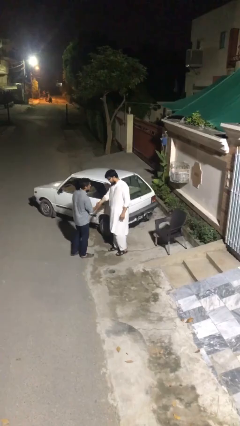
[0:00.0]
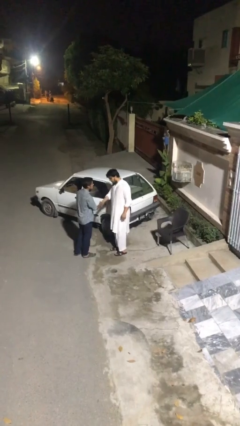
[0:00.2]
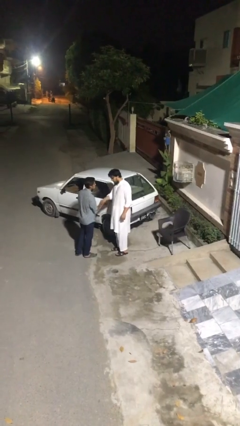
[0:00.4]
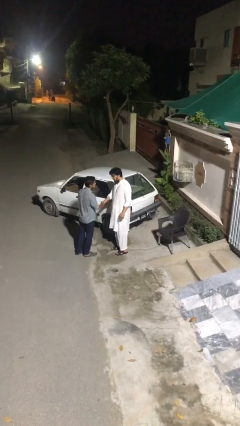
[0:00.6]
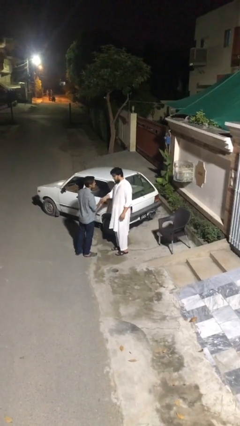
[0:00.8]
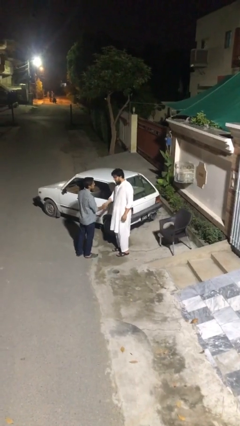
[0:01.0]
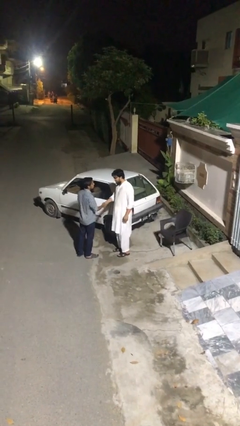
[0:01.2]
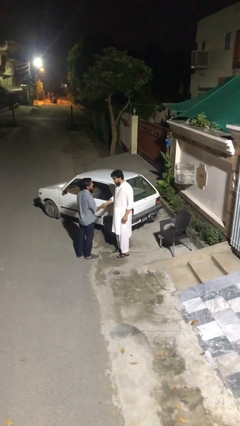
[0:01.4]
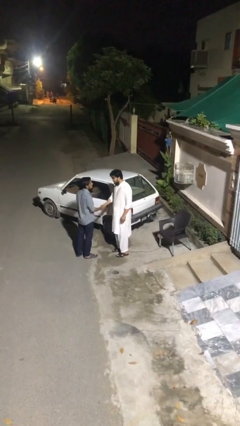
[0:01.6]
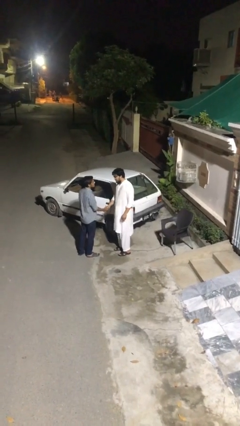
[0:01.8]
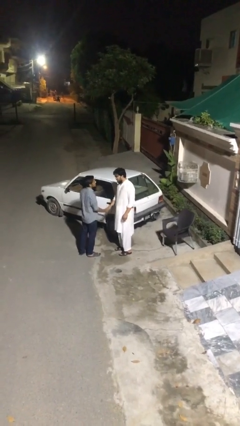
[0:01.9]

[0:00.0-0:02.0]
person shakes hand

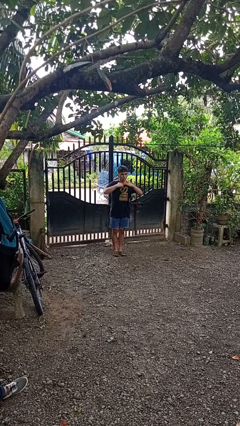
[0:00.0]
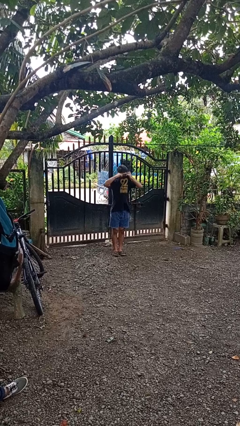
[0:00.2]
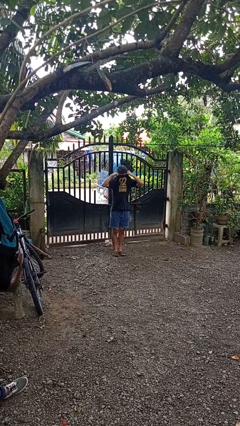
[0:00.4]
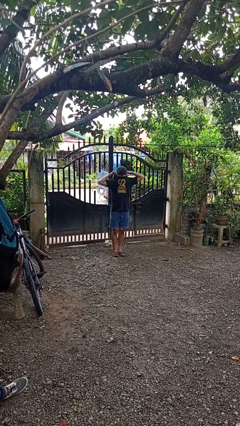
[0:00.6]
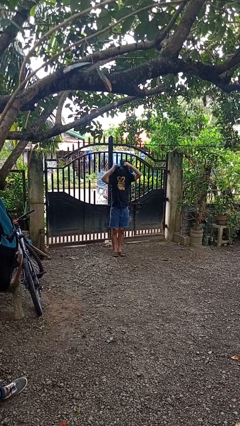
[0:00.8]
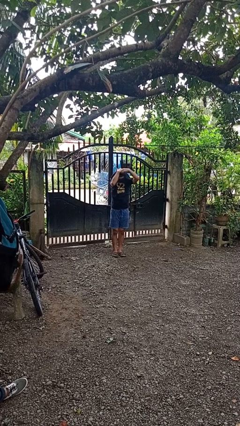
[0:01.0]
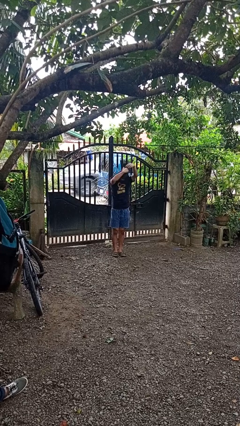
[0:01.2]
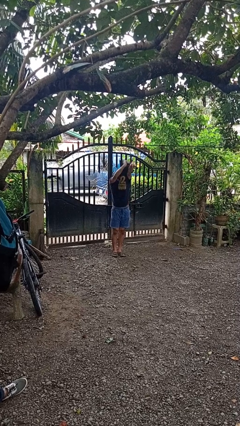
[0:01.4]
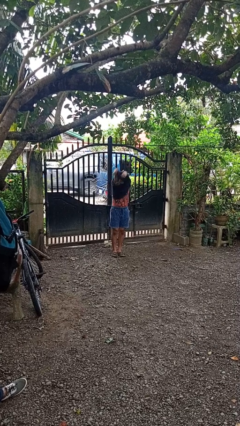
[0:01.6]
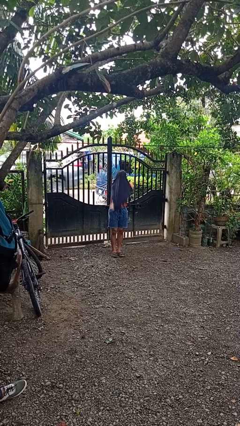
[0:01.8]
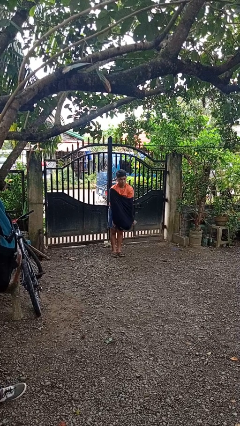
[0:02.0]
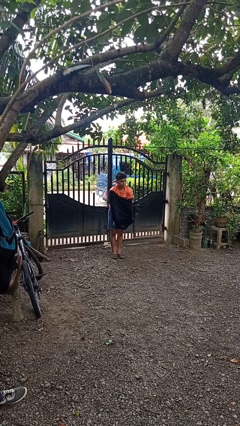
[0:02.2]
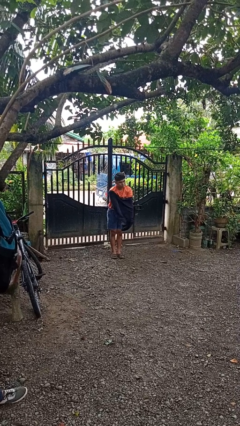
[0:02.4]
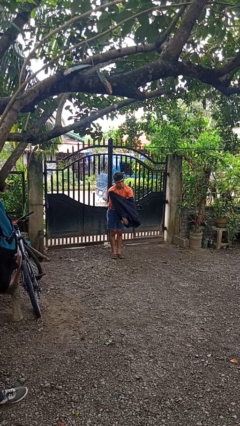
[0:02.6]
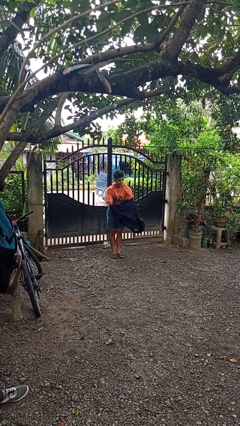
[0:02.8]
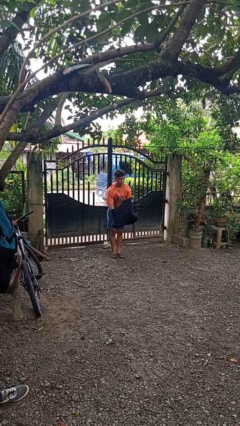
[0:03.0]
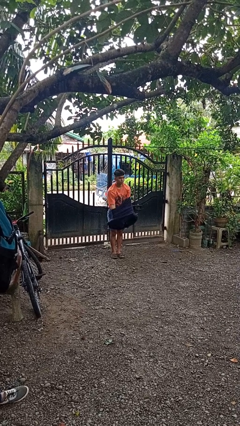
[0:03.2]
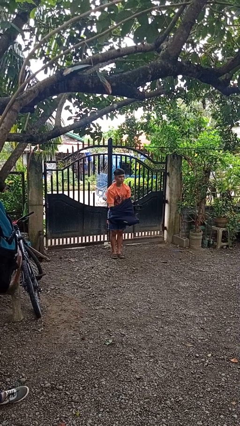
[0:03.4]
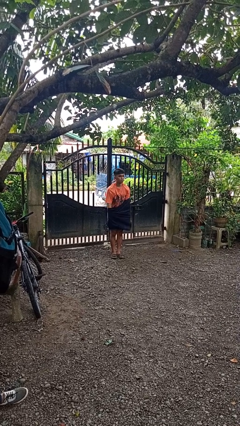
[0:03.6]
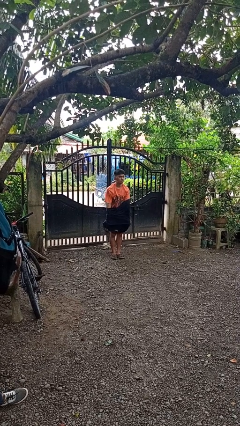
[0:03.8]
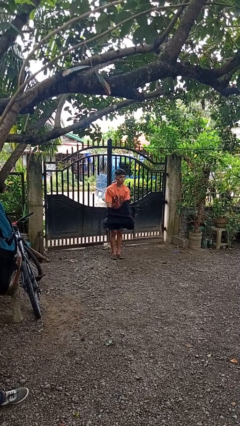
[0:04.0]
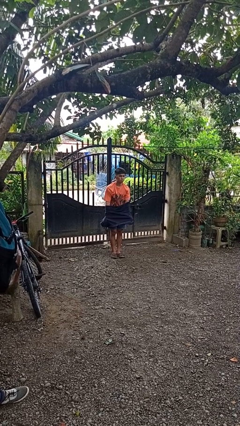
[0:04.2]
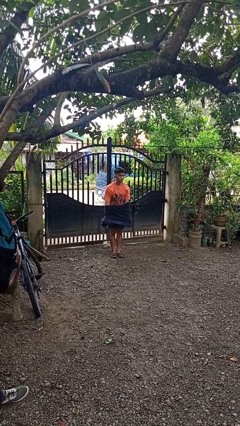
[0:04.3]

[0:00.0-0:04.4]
person takes off shirt

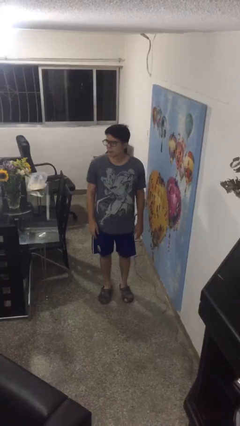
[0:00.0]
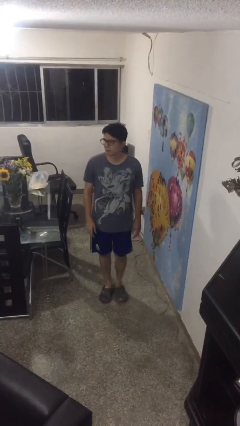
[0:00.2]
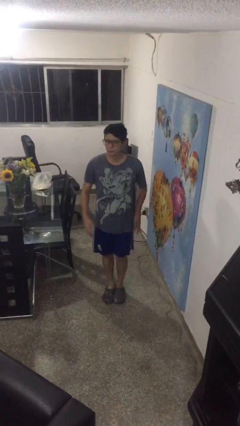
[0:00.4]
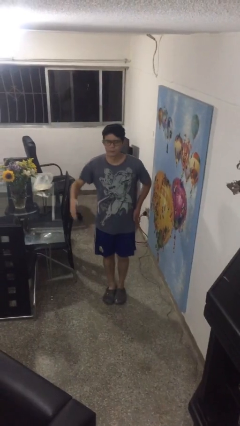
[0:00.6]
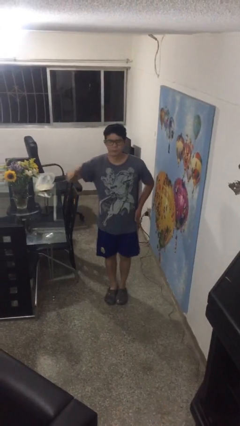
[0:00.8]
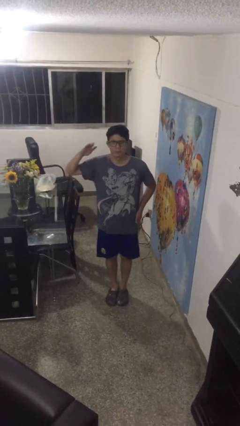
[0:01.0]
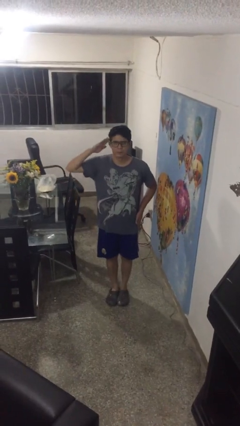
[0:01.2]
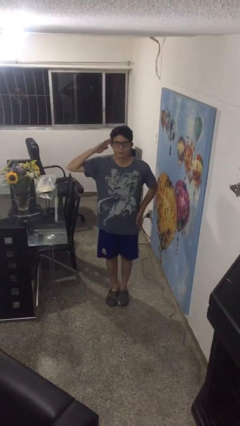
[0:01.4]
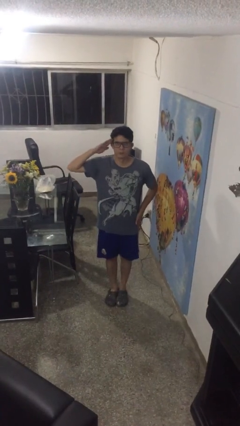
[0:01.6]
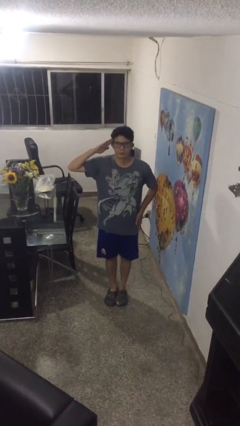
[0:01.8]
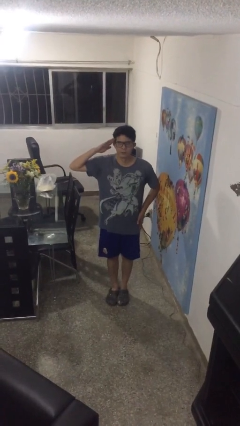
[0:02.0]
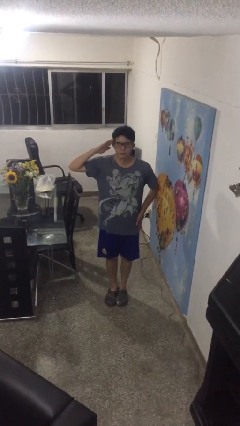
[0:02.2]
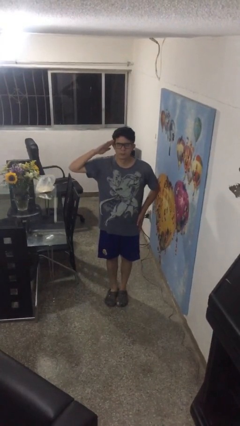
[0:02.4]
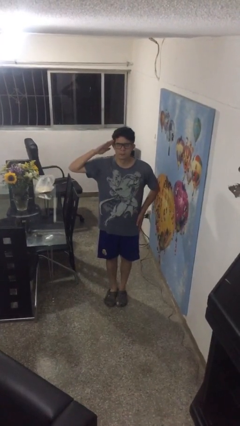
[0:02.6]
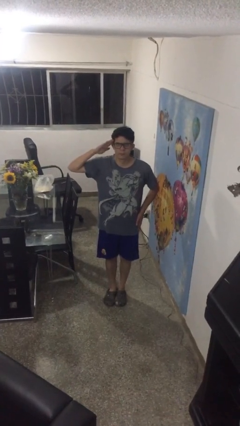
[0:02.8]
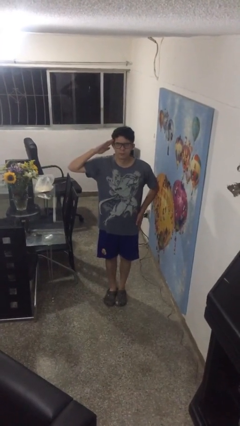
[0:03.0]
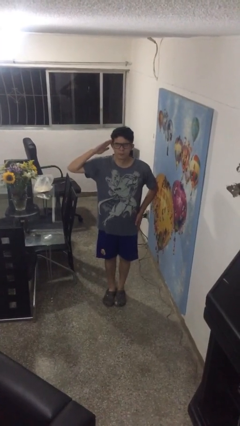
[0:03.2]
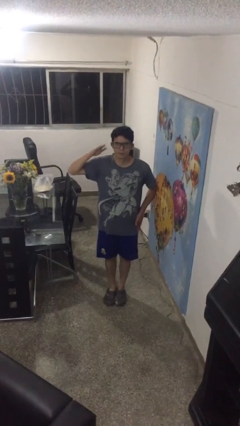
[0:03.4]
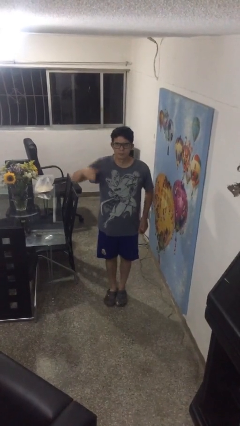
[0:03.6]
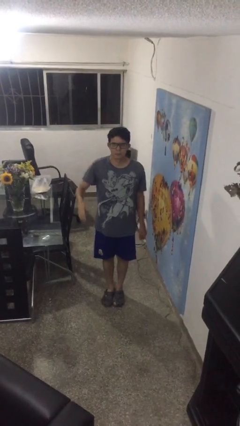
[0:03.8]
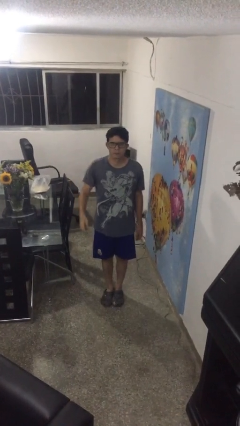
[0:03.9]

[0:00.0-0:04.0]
person salutes

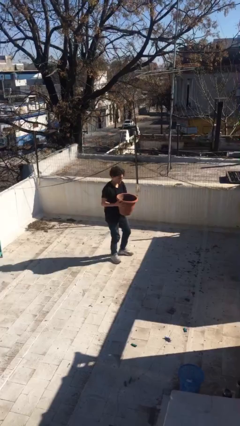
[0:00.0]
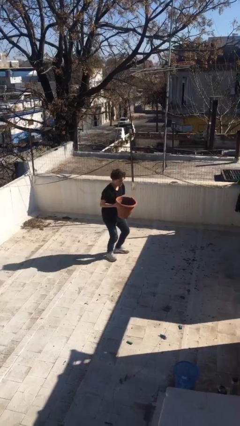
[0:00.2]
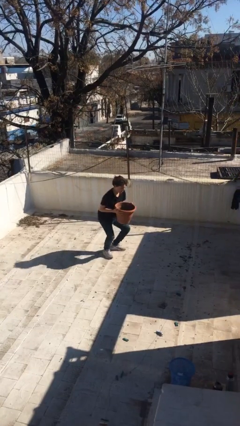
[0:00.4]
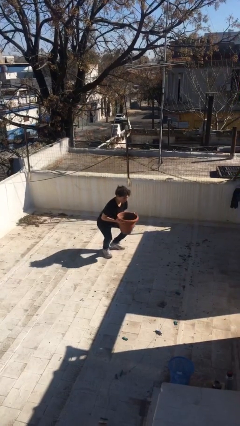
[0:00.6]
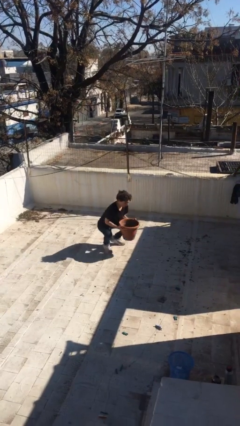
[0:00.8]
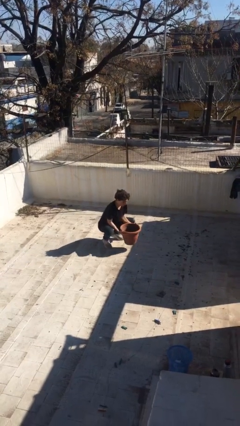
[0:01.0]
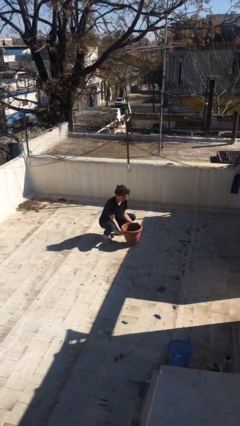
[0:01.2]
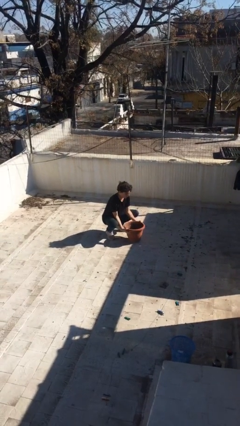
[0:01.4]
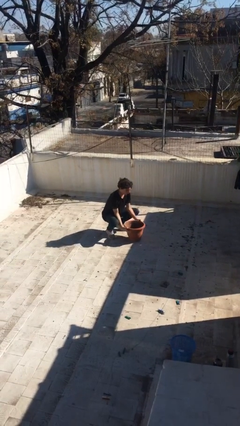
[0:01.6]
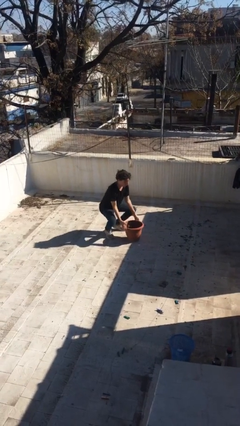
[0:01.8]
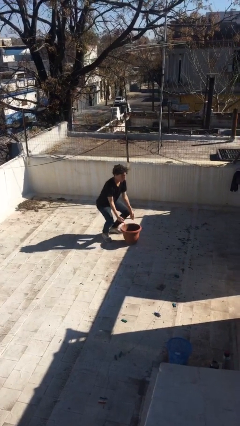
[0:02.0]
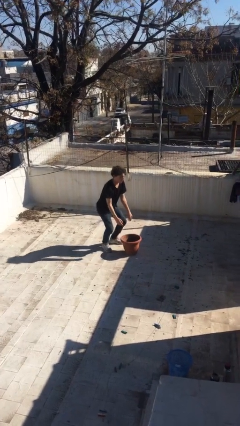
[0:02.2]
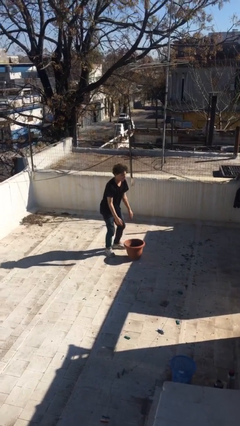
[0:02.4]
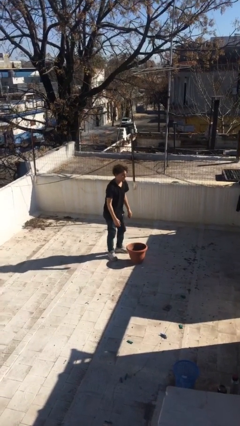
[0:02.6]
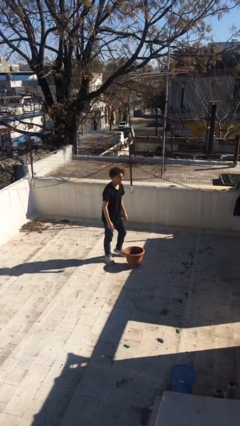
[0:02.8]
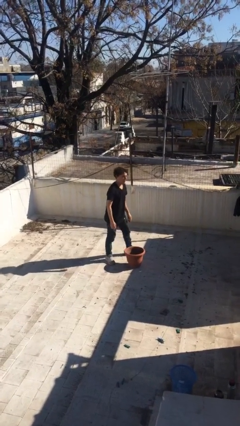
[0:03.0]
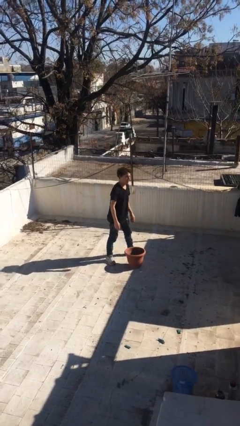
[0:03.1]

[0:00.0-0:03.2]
person puts down object on floor

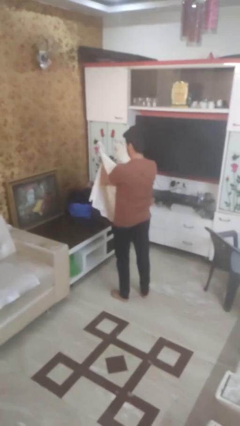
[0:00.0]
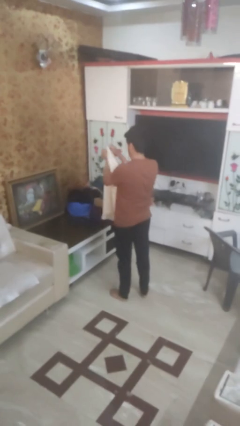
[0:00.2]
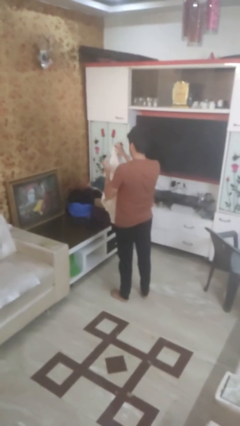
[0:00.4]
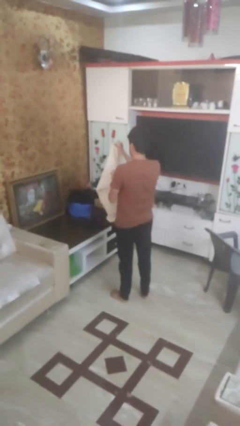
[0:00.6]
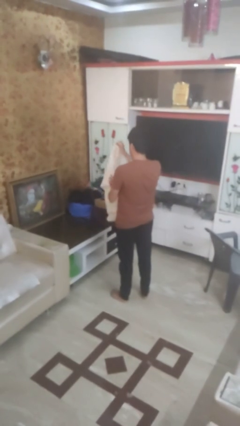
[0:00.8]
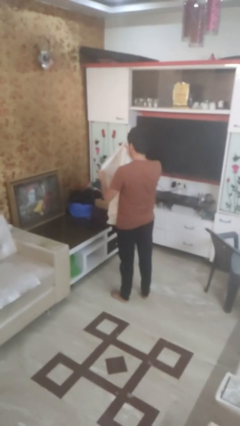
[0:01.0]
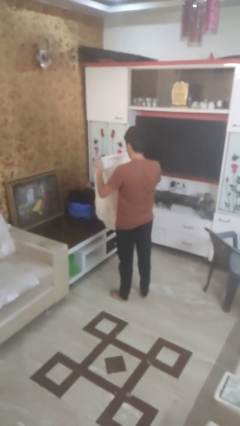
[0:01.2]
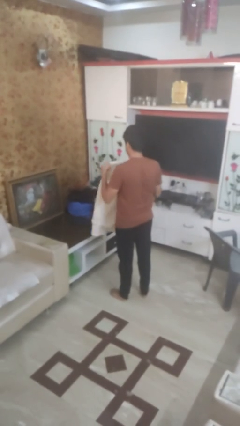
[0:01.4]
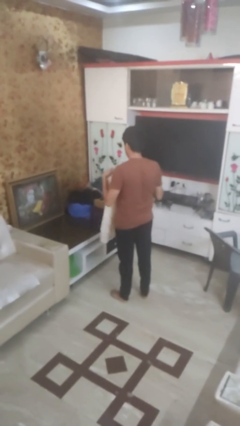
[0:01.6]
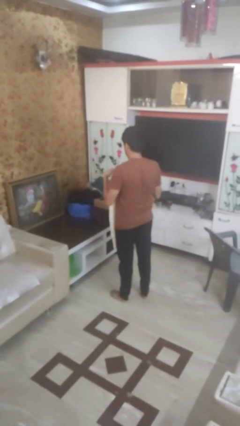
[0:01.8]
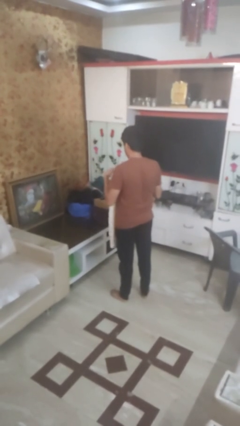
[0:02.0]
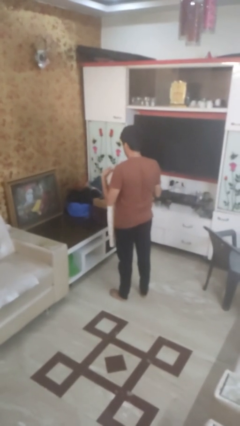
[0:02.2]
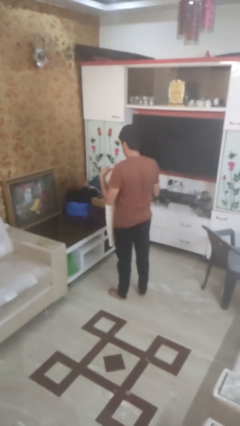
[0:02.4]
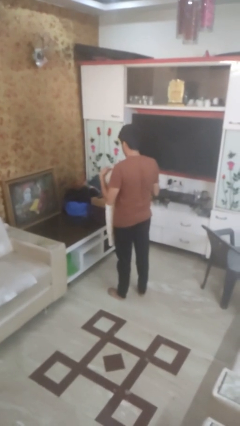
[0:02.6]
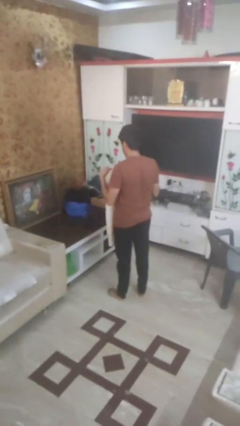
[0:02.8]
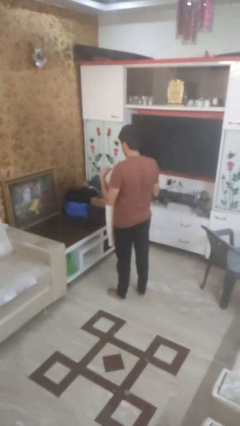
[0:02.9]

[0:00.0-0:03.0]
person folds tablecloth

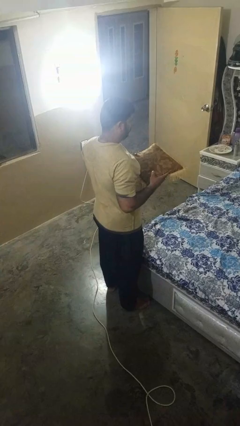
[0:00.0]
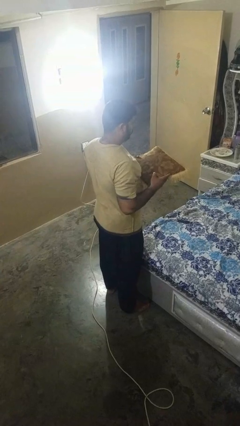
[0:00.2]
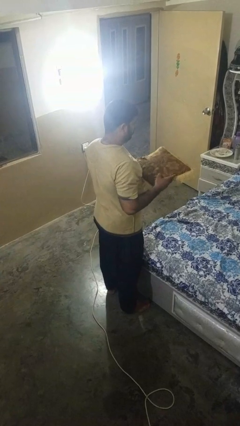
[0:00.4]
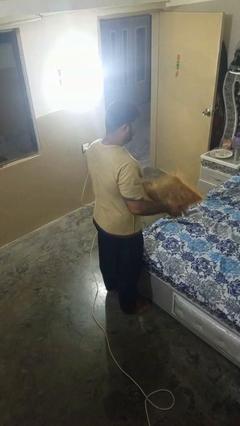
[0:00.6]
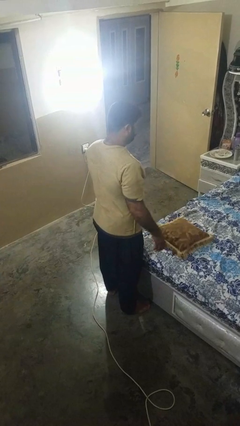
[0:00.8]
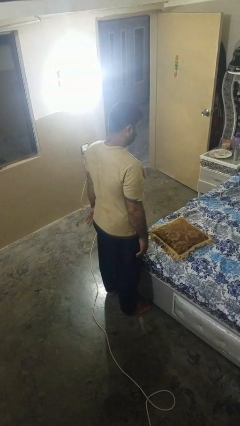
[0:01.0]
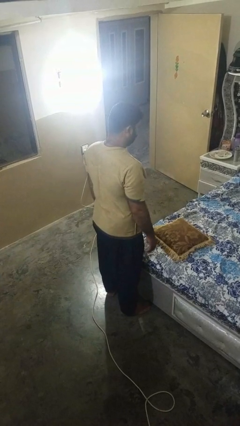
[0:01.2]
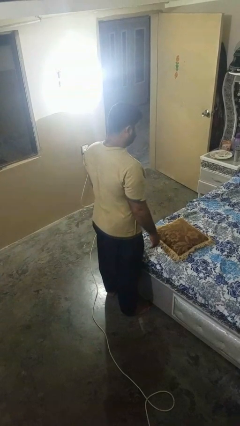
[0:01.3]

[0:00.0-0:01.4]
person puts down object on bed
